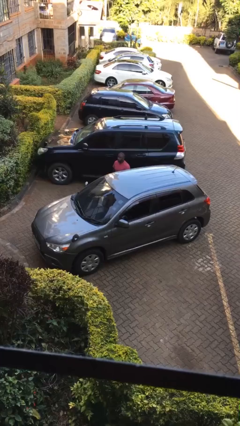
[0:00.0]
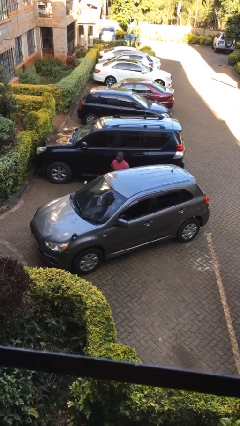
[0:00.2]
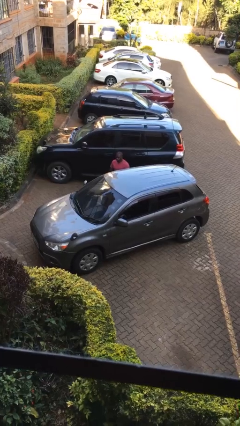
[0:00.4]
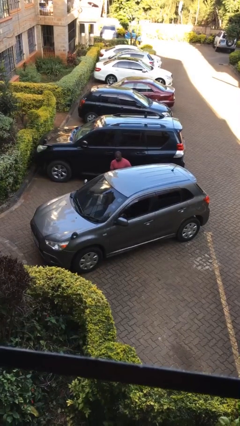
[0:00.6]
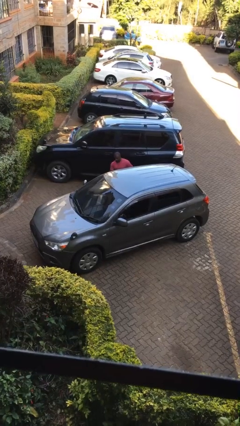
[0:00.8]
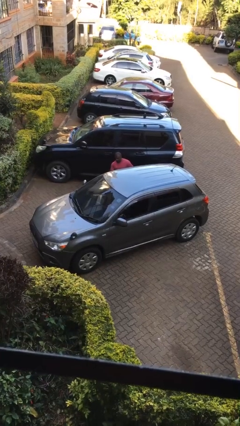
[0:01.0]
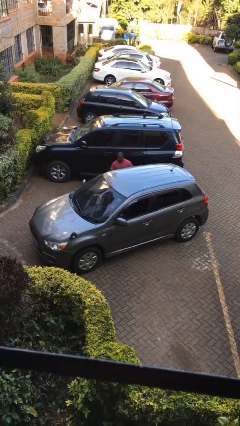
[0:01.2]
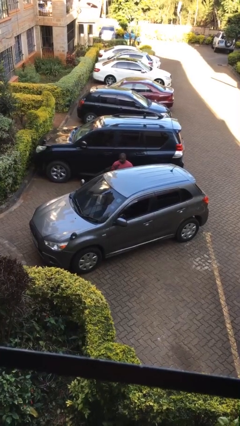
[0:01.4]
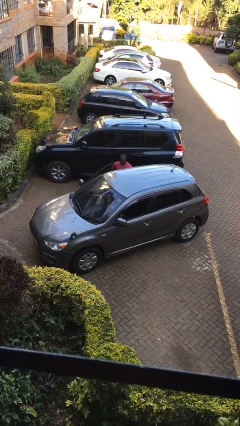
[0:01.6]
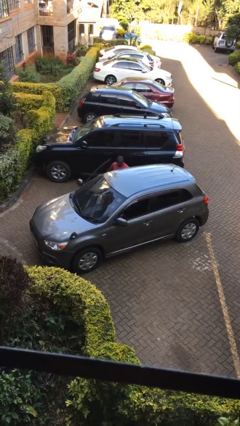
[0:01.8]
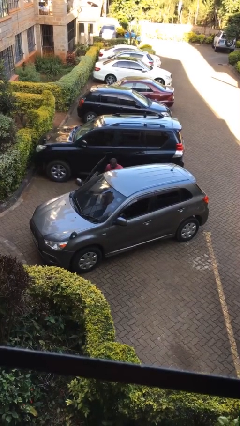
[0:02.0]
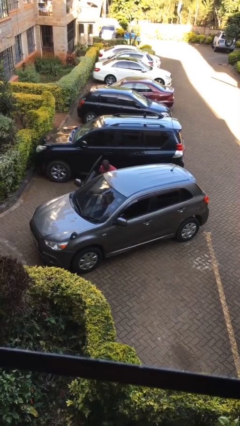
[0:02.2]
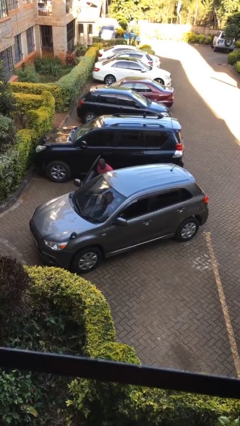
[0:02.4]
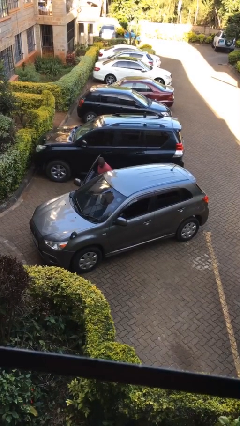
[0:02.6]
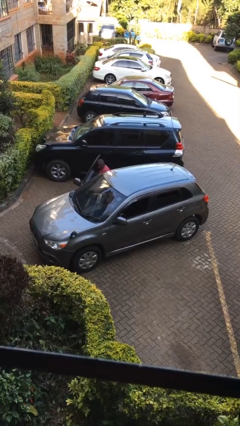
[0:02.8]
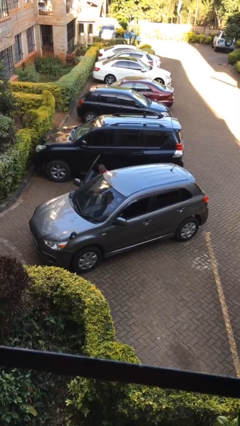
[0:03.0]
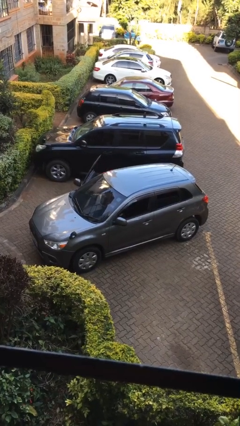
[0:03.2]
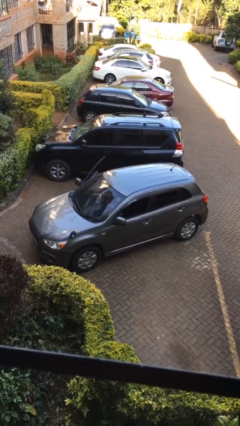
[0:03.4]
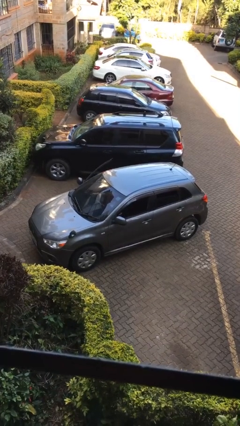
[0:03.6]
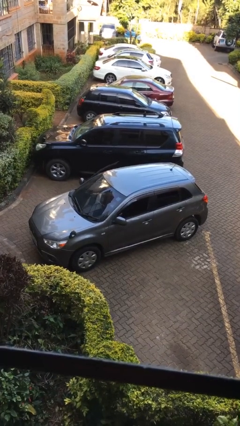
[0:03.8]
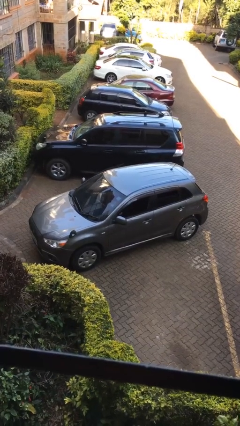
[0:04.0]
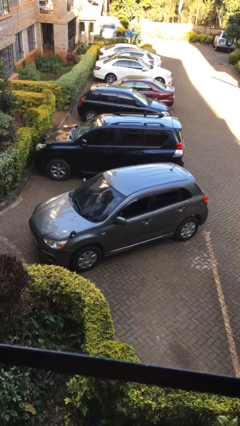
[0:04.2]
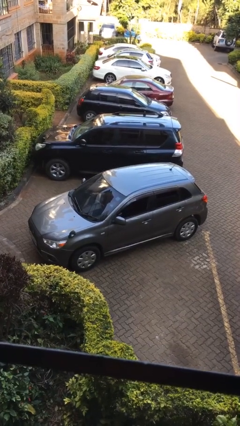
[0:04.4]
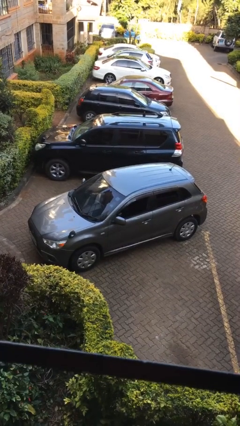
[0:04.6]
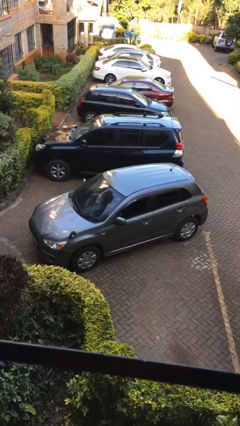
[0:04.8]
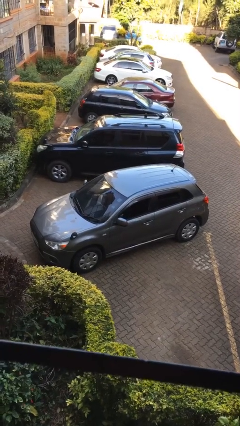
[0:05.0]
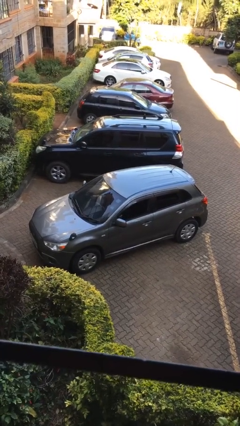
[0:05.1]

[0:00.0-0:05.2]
car picks up person

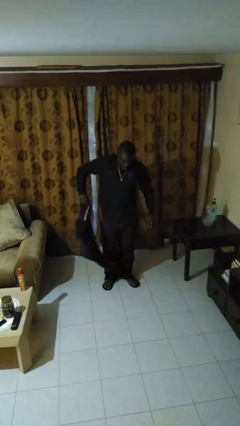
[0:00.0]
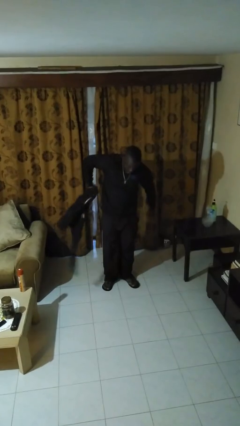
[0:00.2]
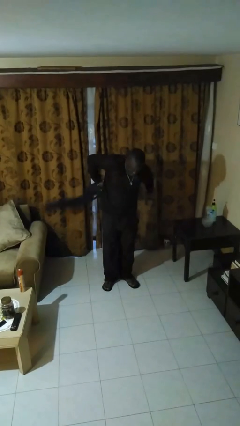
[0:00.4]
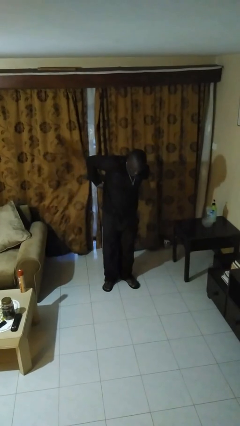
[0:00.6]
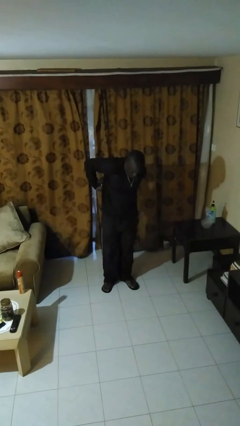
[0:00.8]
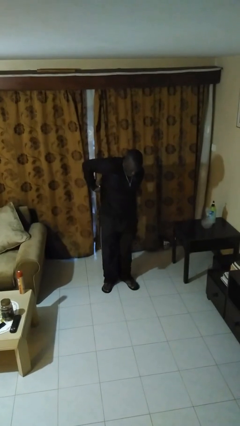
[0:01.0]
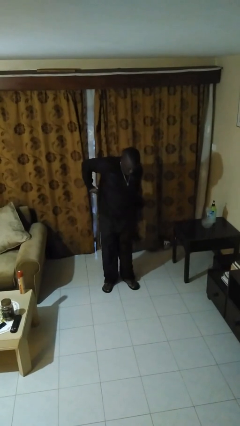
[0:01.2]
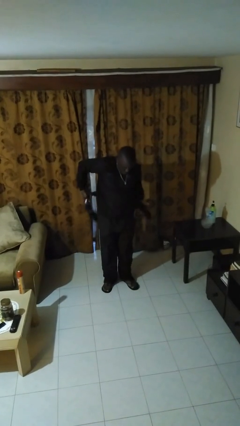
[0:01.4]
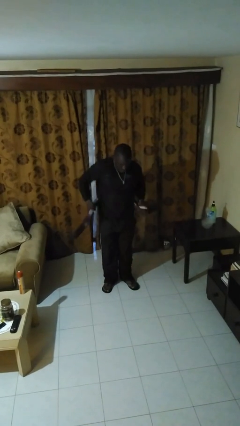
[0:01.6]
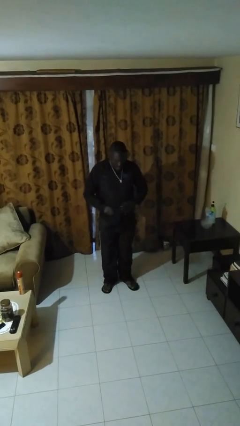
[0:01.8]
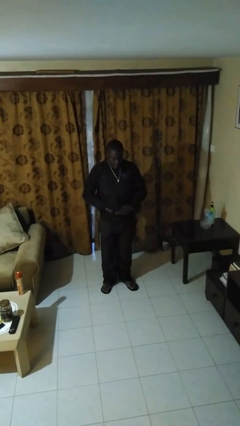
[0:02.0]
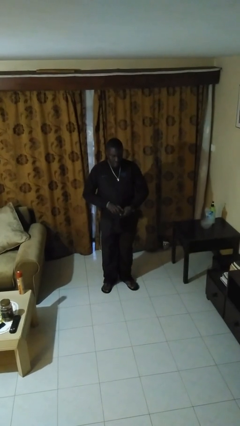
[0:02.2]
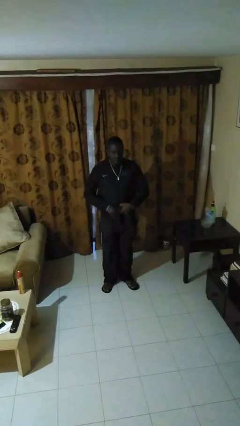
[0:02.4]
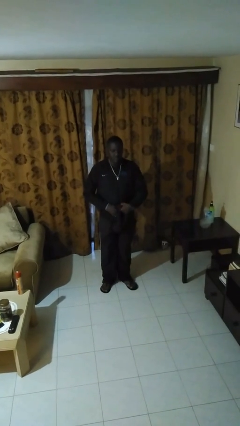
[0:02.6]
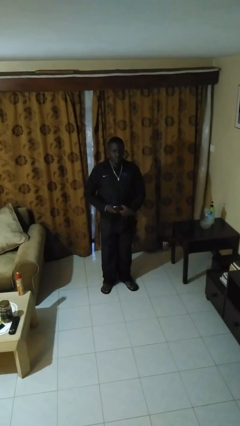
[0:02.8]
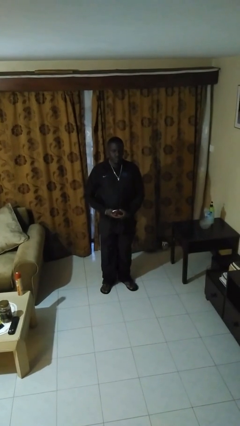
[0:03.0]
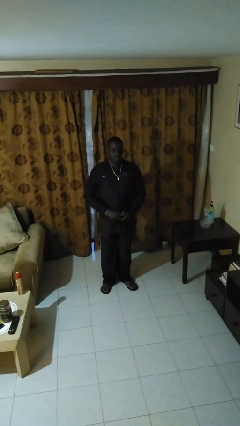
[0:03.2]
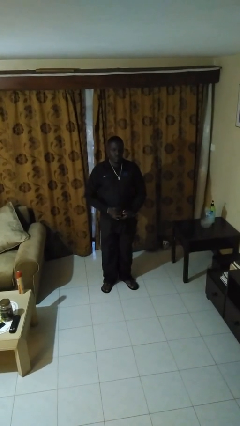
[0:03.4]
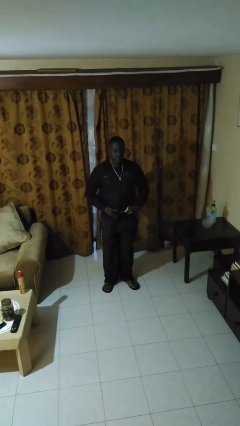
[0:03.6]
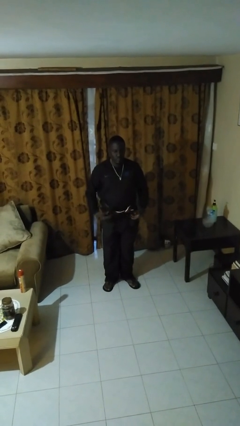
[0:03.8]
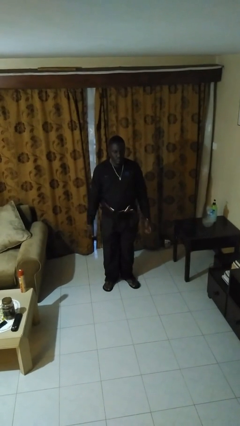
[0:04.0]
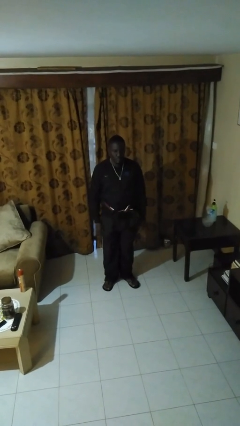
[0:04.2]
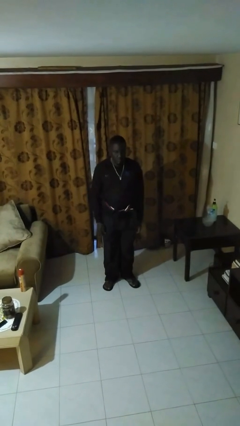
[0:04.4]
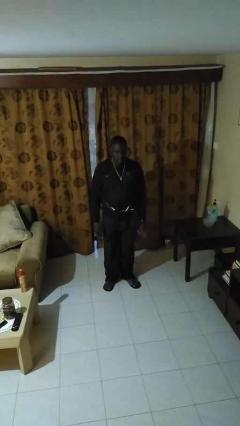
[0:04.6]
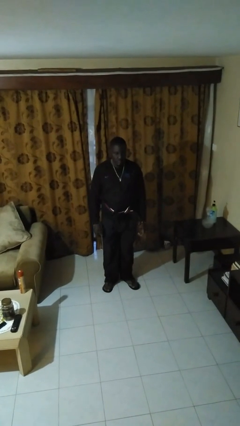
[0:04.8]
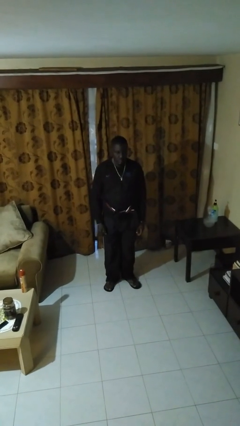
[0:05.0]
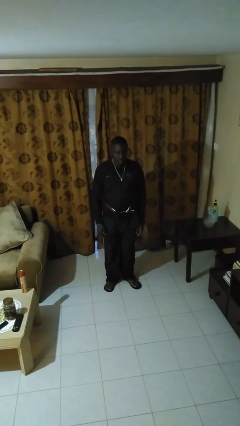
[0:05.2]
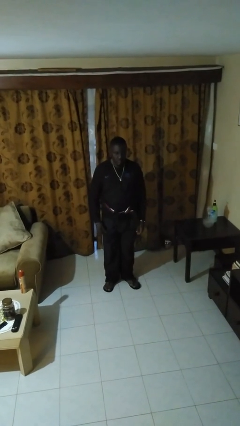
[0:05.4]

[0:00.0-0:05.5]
person ties jacket around waist

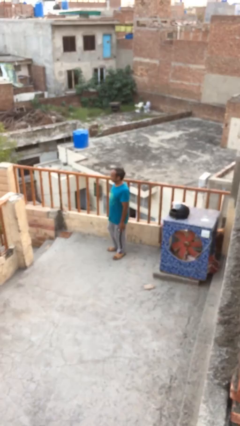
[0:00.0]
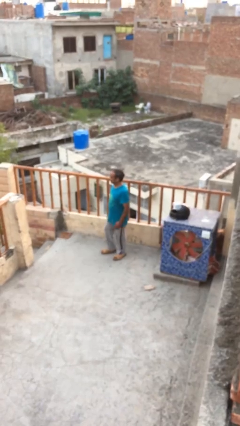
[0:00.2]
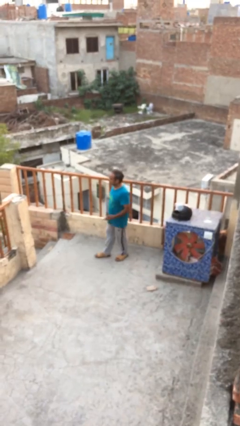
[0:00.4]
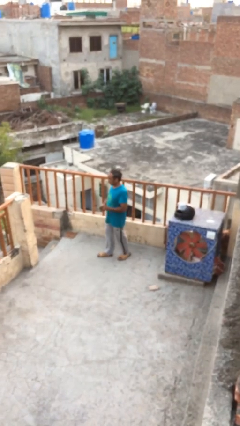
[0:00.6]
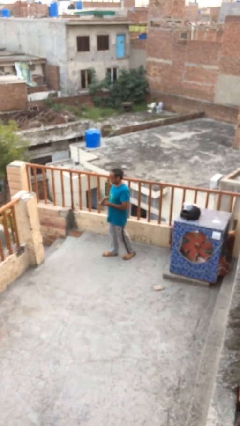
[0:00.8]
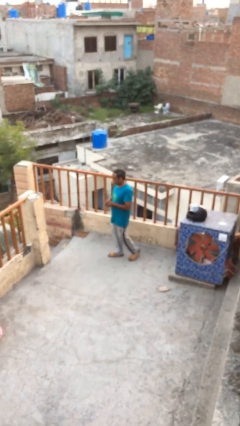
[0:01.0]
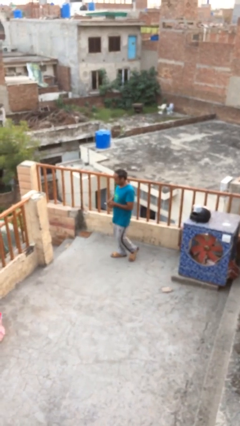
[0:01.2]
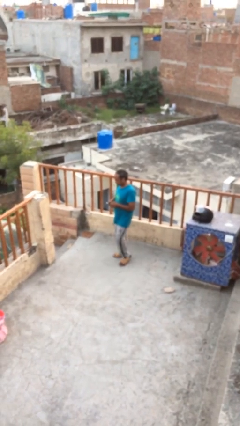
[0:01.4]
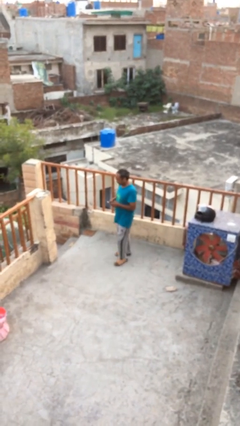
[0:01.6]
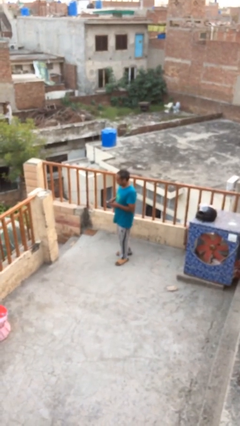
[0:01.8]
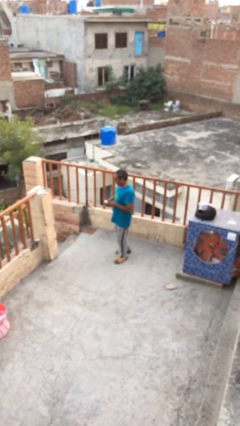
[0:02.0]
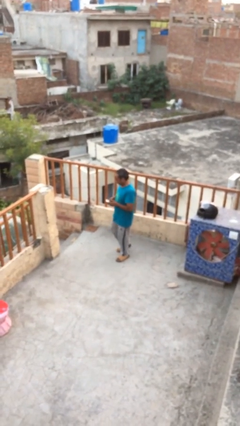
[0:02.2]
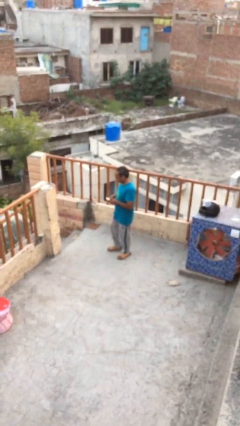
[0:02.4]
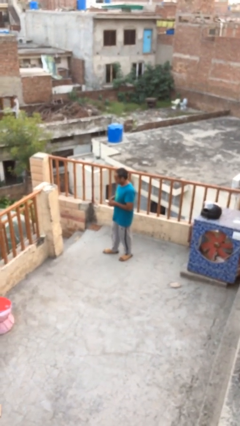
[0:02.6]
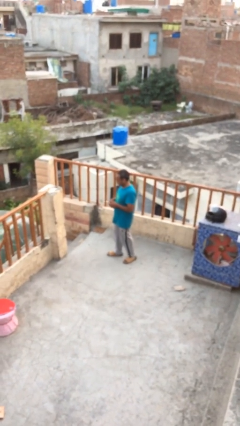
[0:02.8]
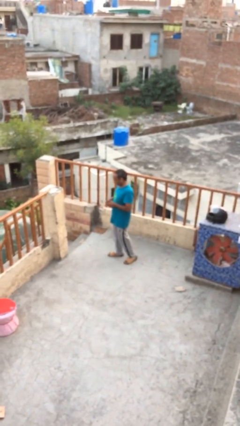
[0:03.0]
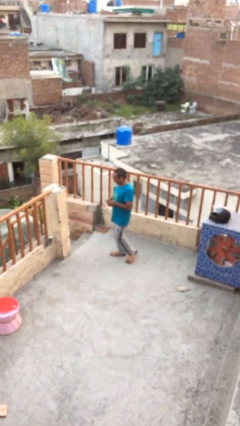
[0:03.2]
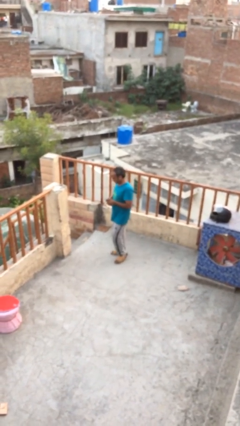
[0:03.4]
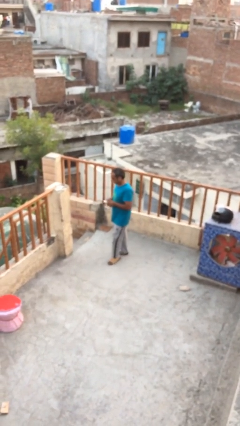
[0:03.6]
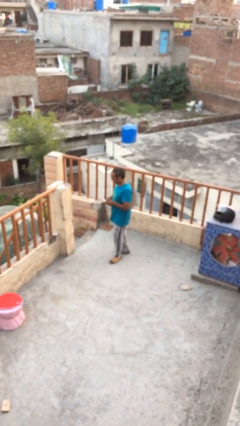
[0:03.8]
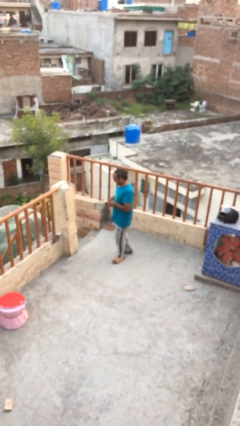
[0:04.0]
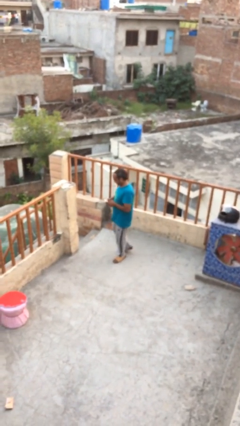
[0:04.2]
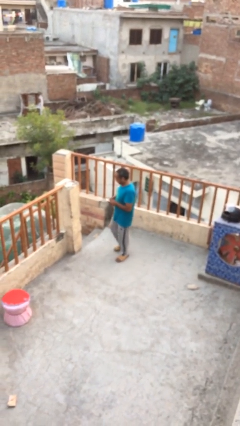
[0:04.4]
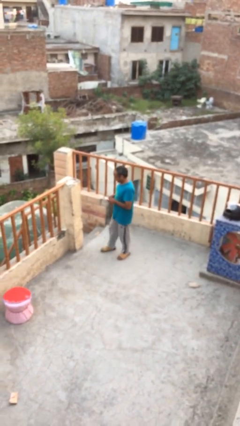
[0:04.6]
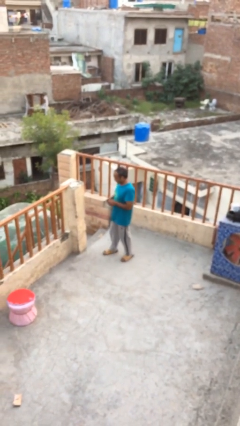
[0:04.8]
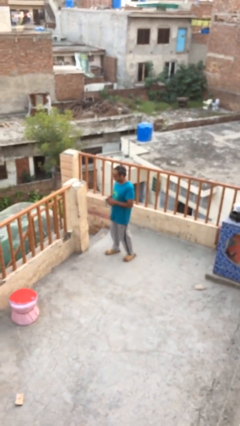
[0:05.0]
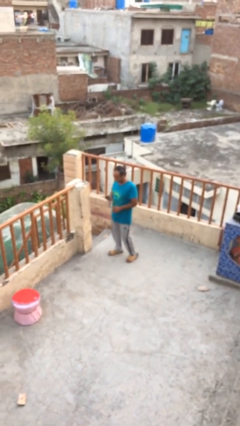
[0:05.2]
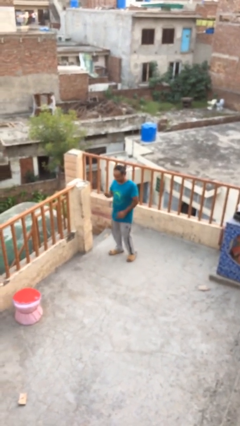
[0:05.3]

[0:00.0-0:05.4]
person texts on phone

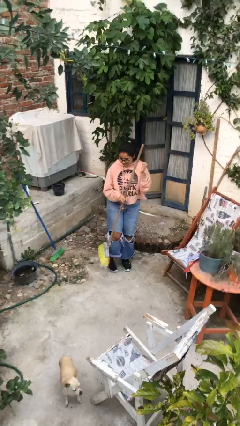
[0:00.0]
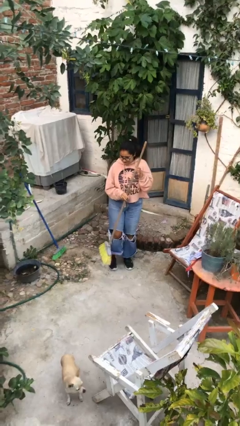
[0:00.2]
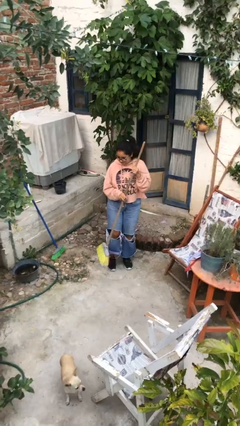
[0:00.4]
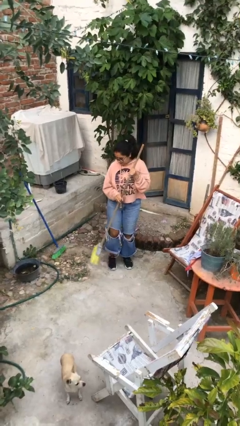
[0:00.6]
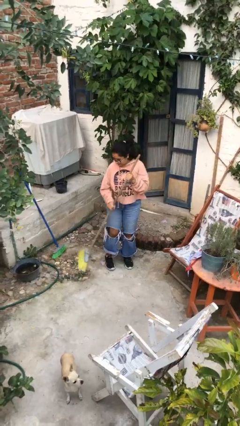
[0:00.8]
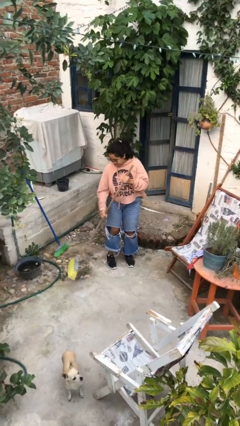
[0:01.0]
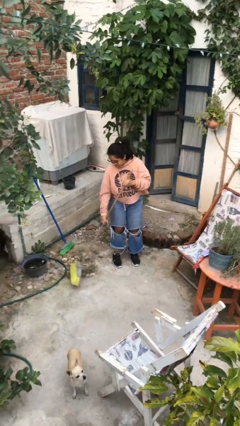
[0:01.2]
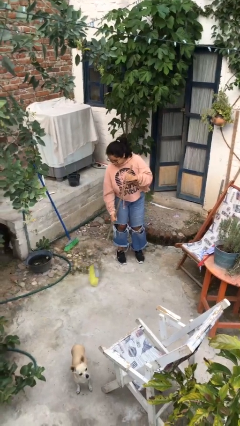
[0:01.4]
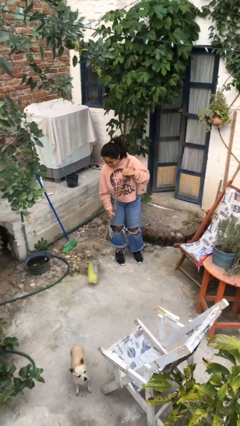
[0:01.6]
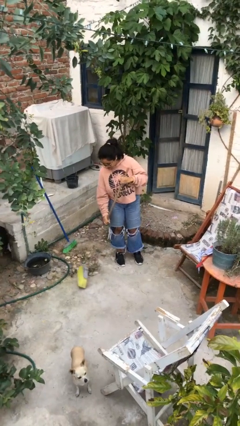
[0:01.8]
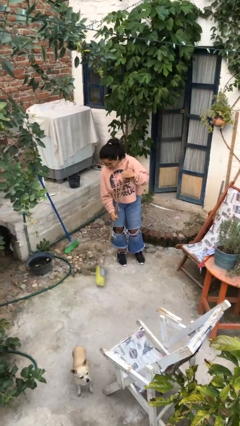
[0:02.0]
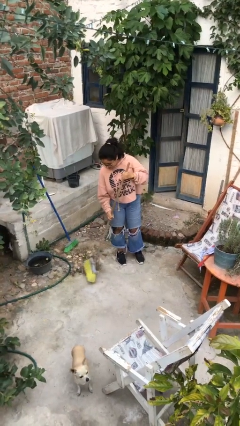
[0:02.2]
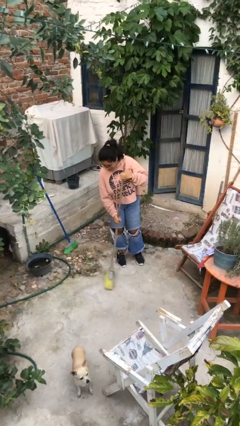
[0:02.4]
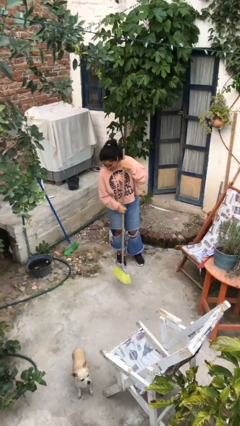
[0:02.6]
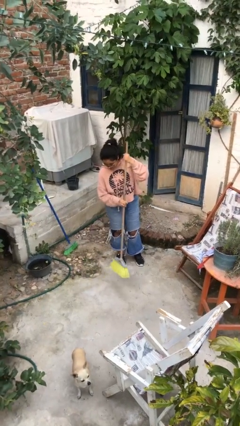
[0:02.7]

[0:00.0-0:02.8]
person sweeps floor
